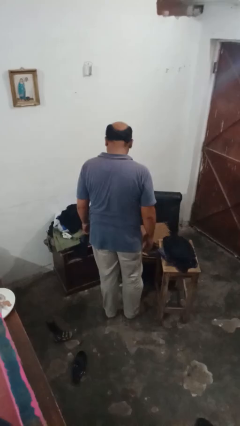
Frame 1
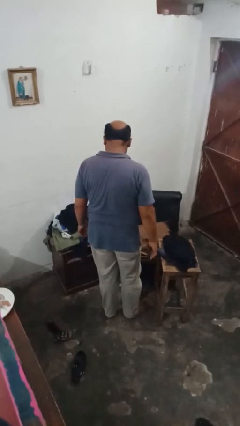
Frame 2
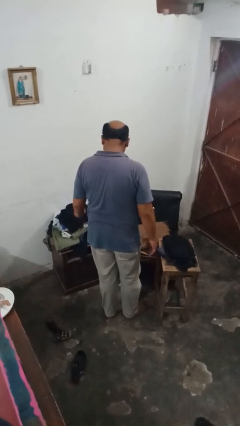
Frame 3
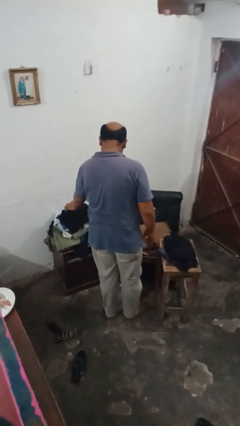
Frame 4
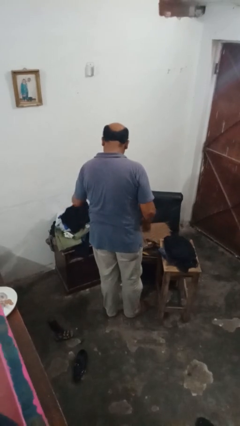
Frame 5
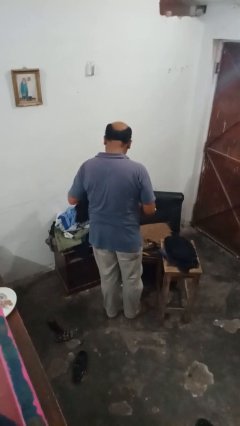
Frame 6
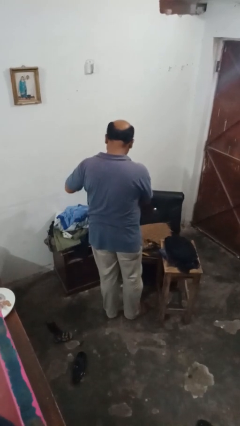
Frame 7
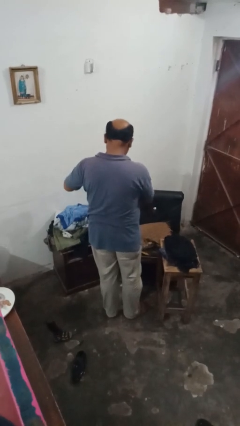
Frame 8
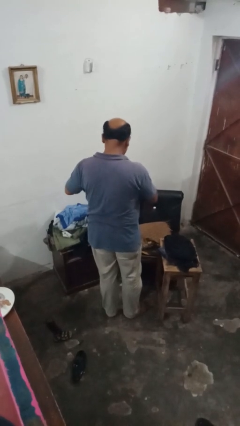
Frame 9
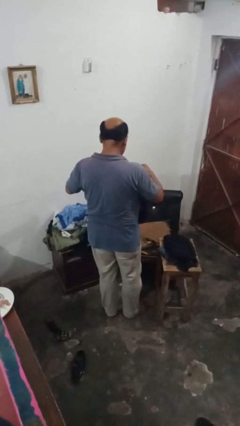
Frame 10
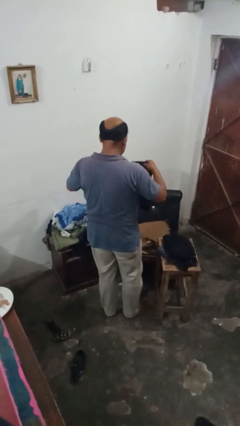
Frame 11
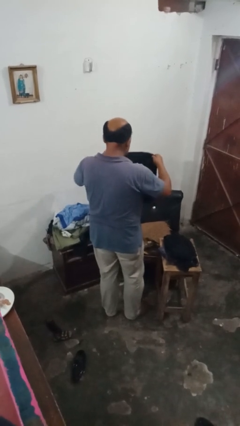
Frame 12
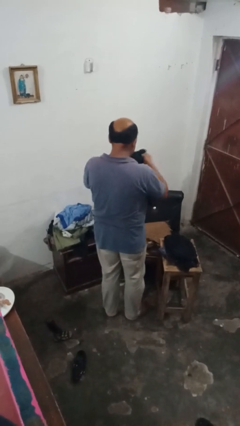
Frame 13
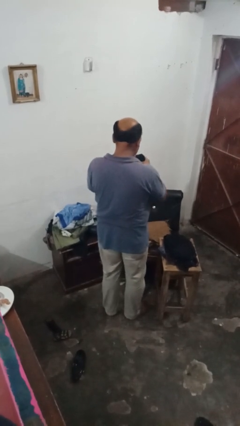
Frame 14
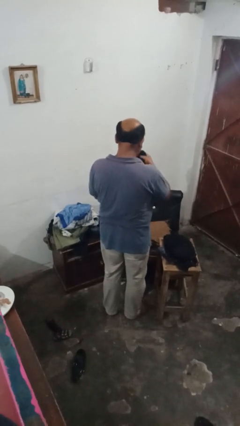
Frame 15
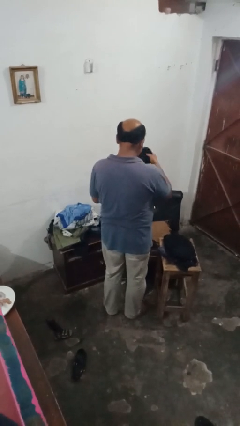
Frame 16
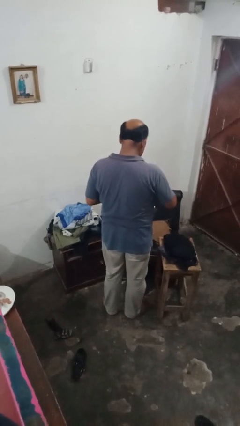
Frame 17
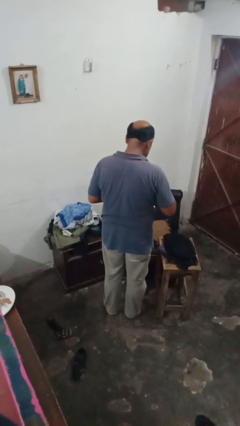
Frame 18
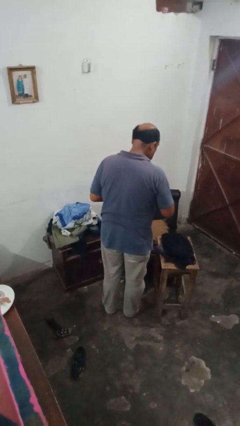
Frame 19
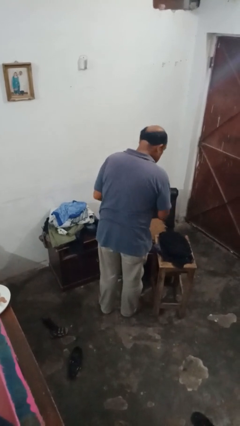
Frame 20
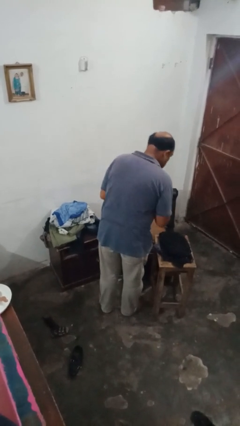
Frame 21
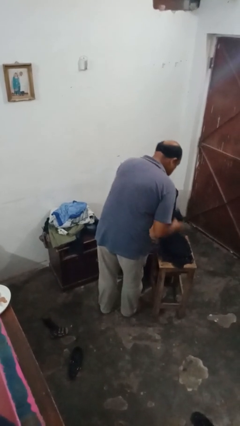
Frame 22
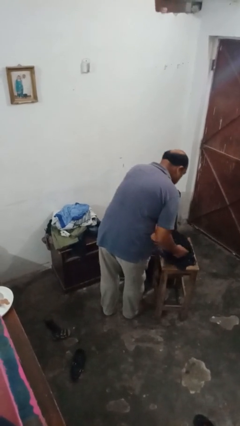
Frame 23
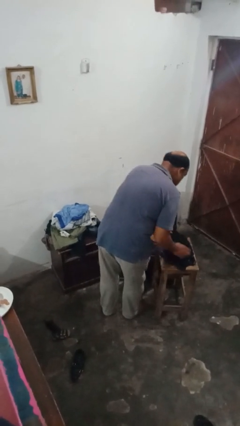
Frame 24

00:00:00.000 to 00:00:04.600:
person folds shirt

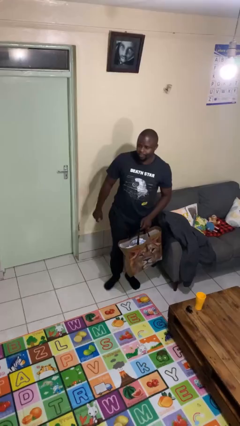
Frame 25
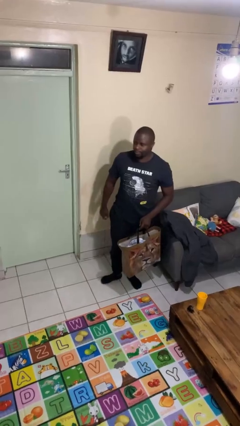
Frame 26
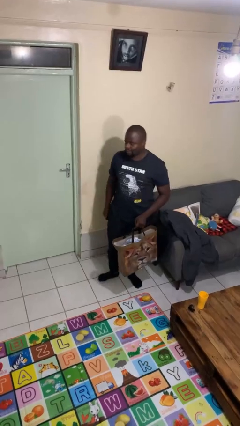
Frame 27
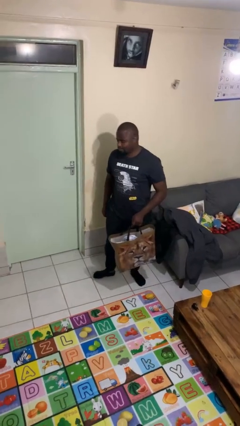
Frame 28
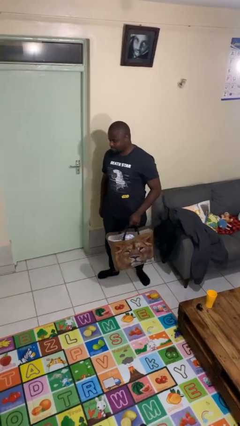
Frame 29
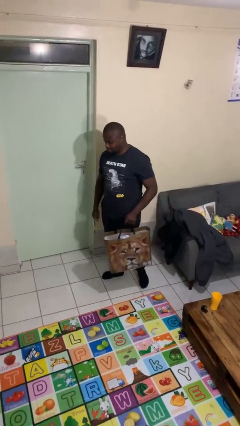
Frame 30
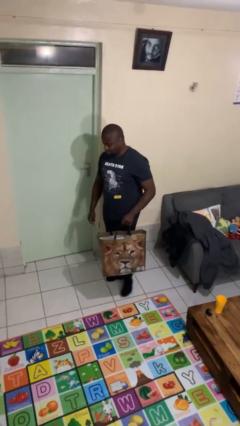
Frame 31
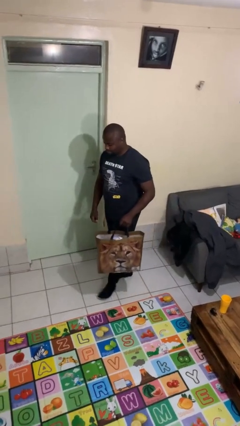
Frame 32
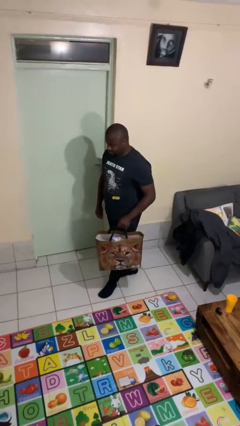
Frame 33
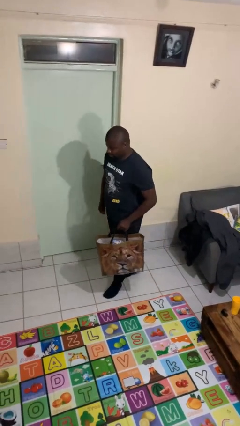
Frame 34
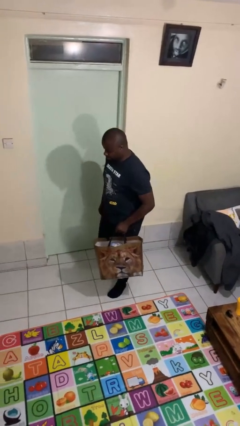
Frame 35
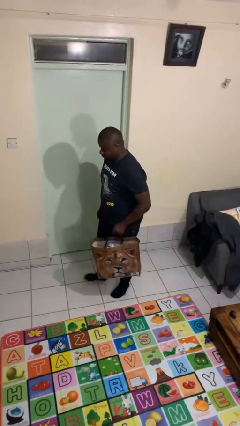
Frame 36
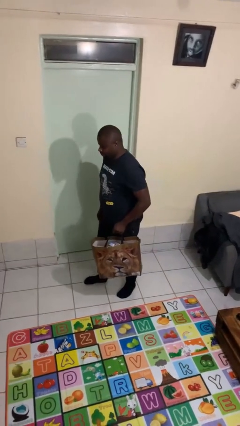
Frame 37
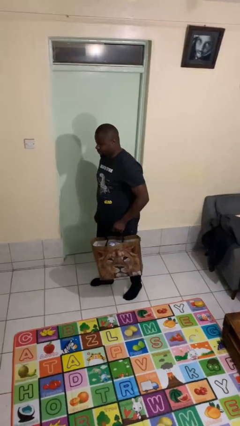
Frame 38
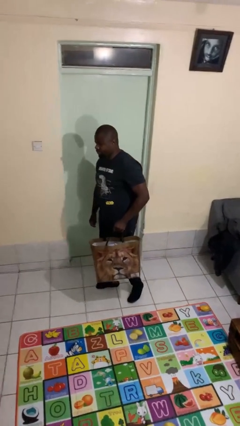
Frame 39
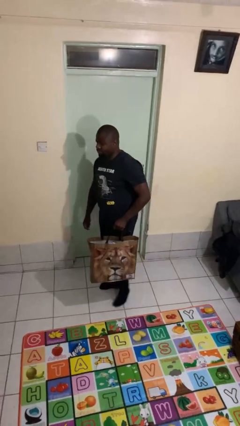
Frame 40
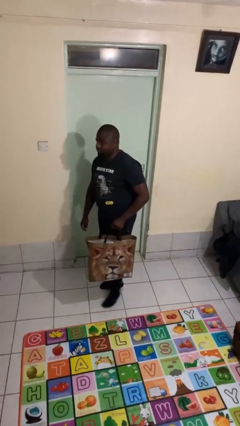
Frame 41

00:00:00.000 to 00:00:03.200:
person carries groceries

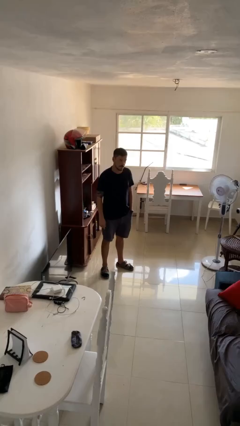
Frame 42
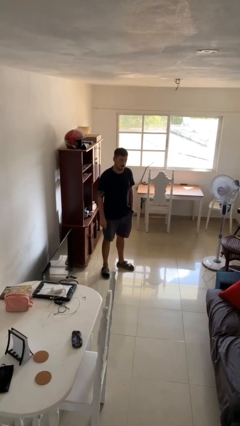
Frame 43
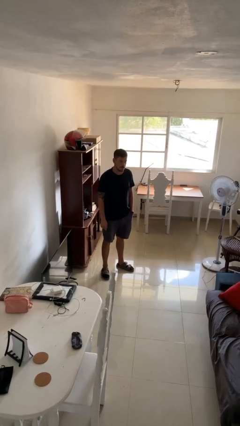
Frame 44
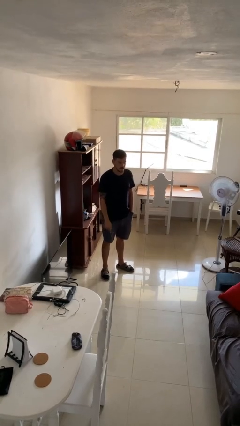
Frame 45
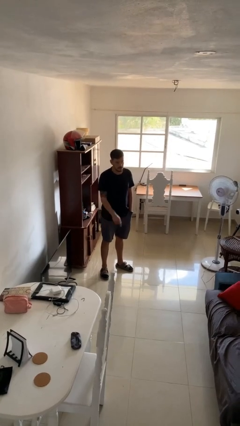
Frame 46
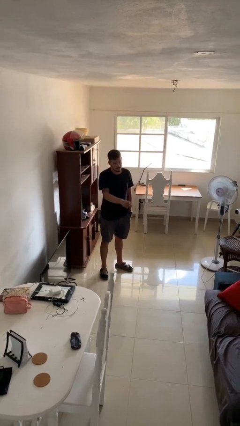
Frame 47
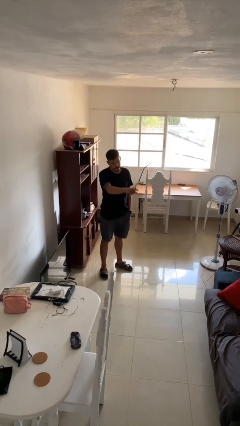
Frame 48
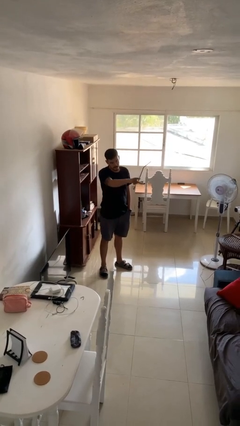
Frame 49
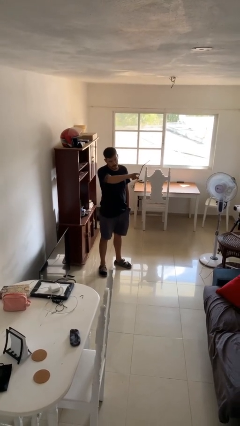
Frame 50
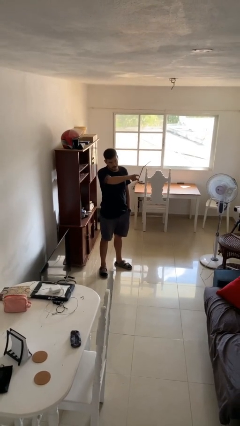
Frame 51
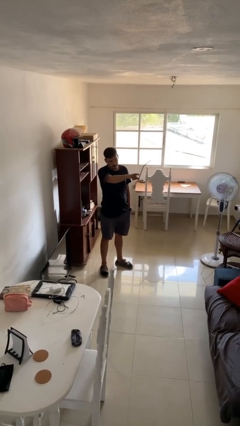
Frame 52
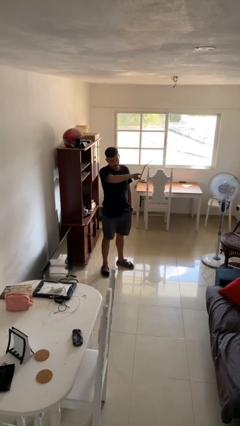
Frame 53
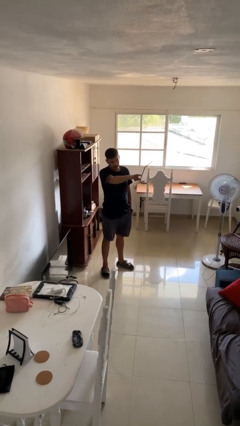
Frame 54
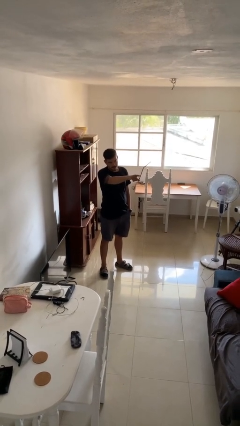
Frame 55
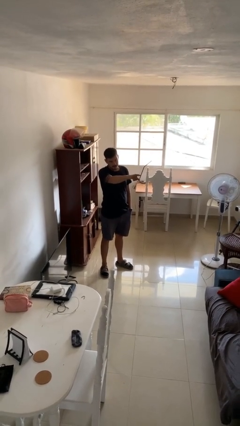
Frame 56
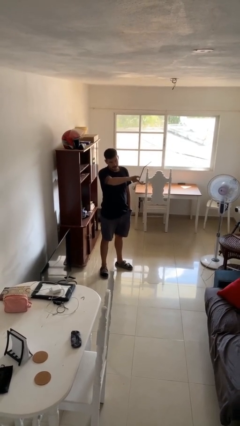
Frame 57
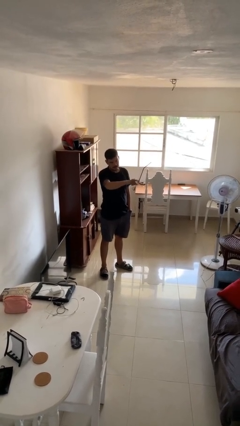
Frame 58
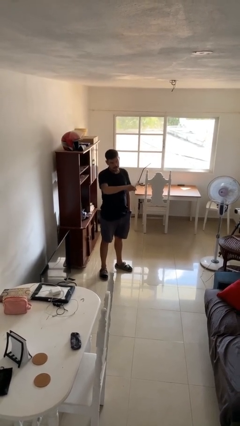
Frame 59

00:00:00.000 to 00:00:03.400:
person points at person

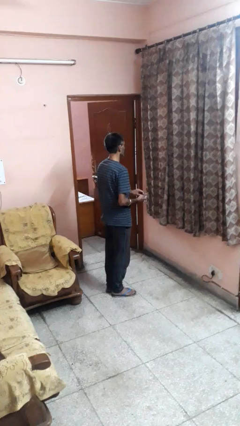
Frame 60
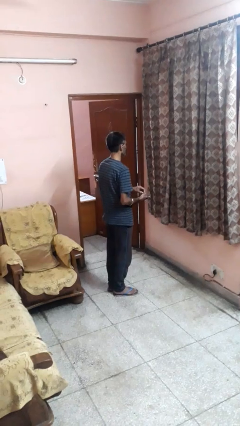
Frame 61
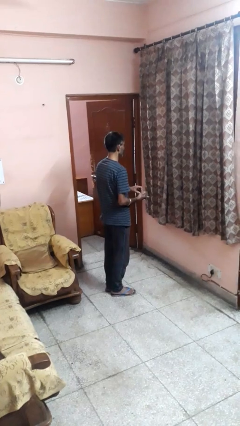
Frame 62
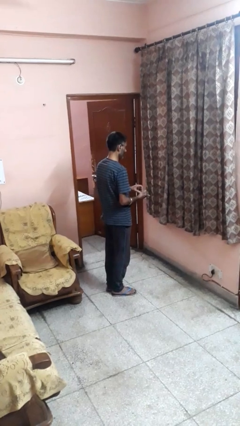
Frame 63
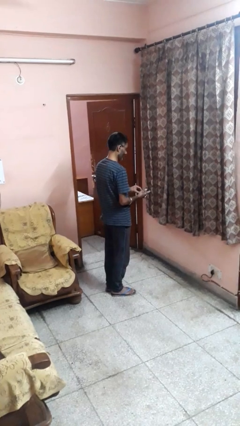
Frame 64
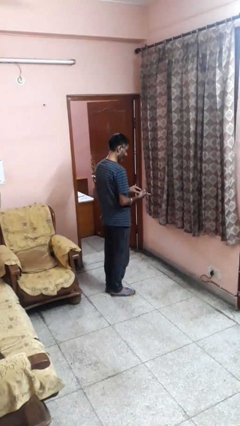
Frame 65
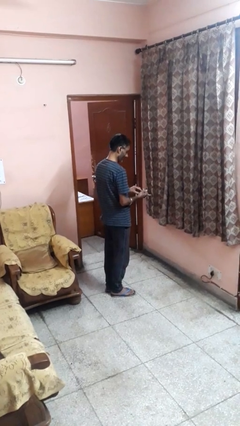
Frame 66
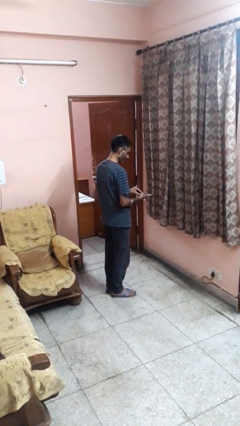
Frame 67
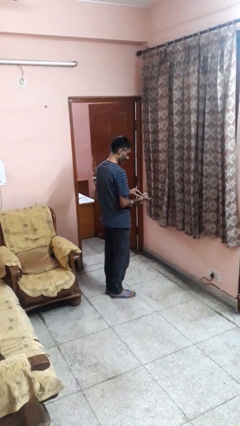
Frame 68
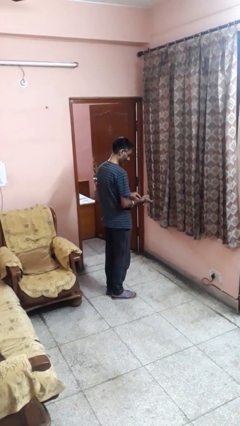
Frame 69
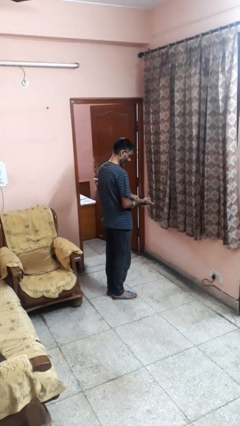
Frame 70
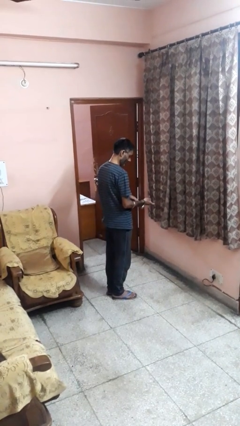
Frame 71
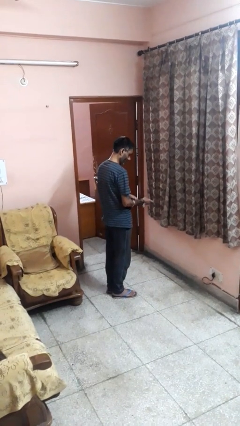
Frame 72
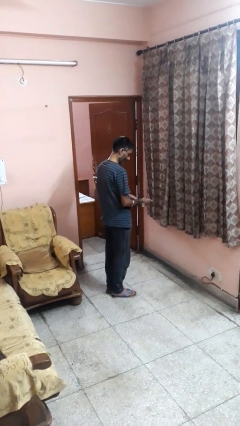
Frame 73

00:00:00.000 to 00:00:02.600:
person puts on wristwatch

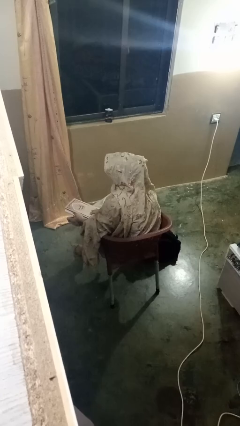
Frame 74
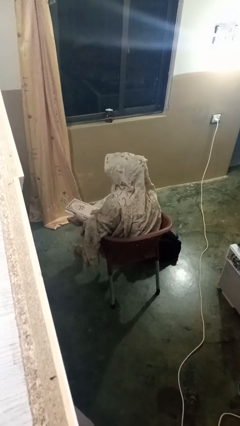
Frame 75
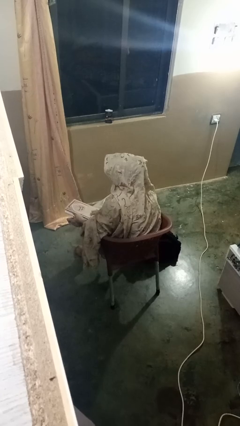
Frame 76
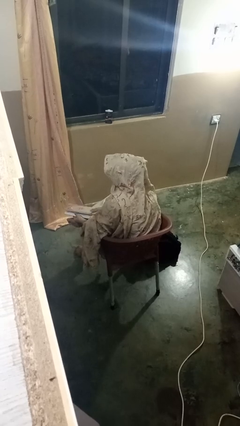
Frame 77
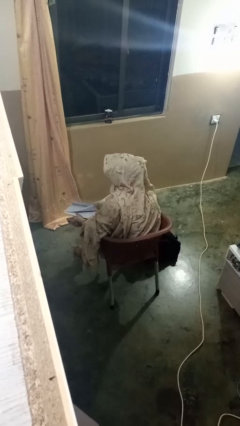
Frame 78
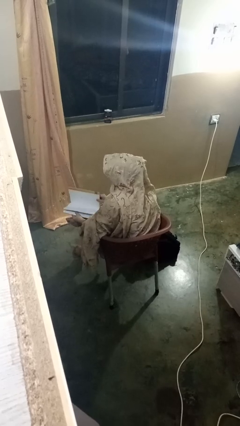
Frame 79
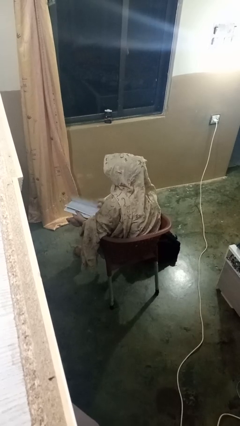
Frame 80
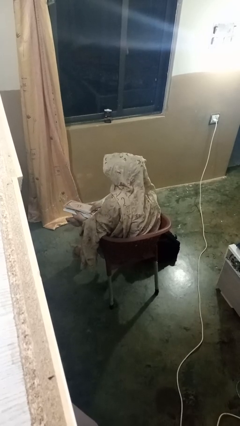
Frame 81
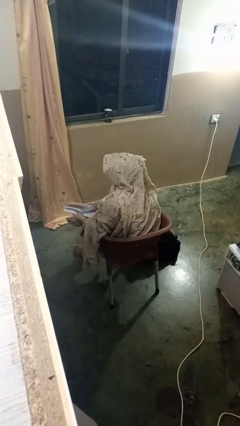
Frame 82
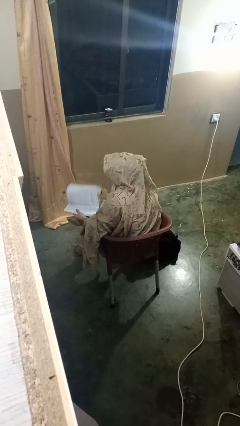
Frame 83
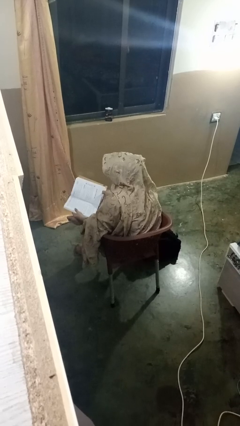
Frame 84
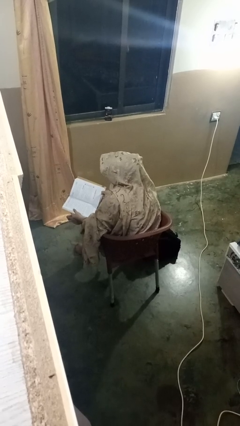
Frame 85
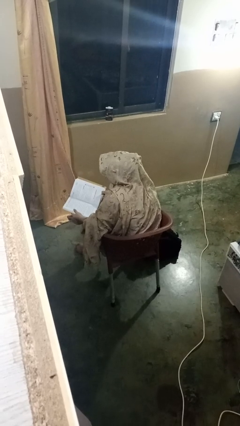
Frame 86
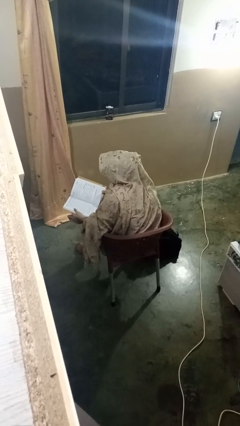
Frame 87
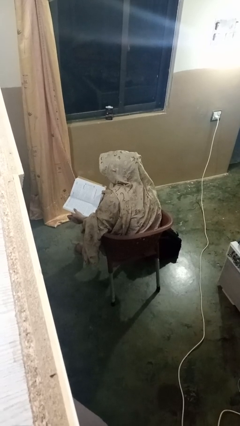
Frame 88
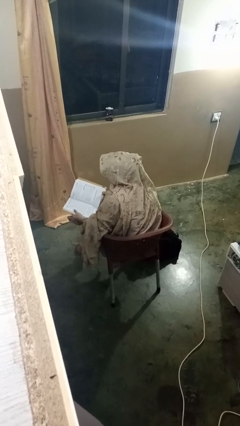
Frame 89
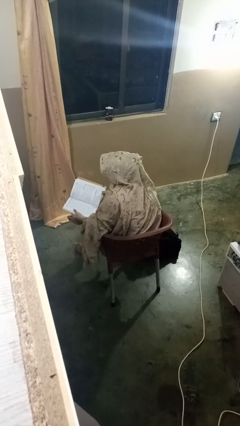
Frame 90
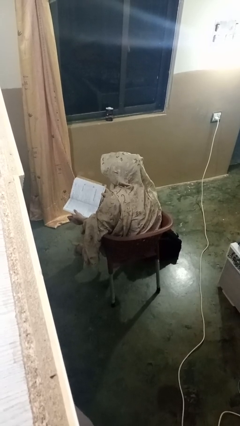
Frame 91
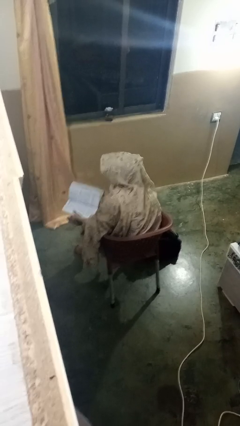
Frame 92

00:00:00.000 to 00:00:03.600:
person reads book

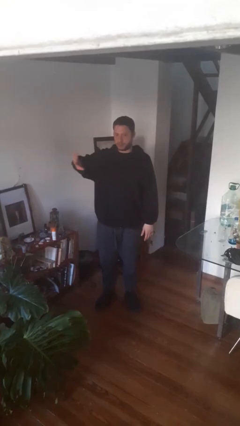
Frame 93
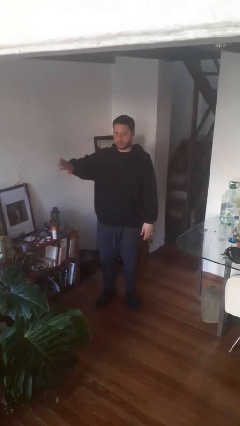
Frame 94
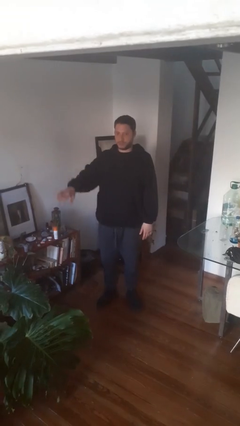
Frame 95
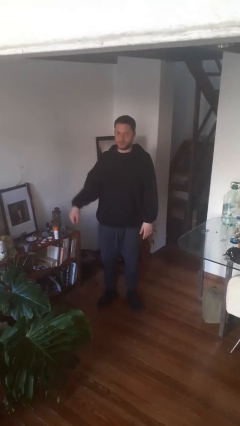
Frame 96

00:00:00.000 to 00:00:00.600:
person gestures swipe right
